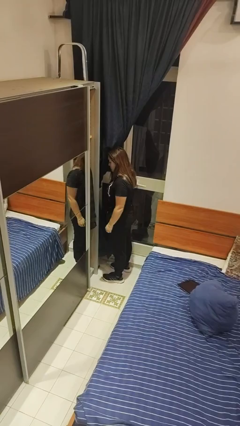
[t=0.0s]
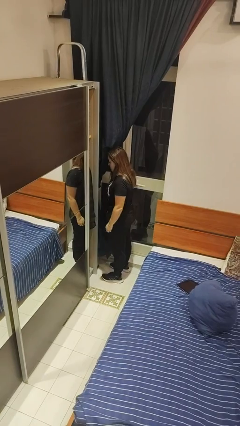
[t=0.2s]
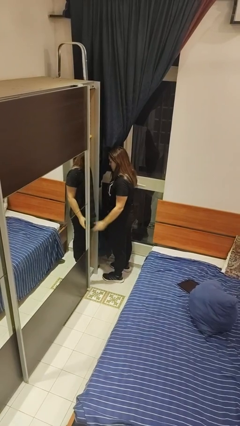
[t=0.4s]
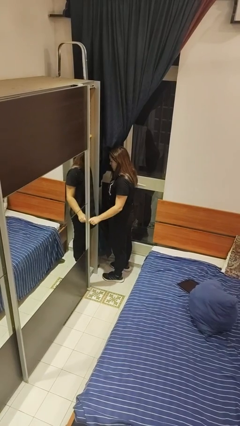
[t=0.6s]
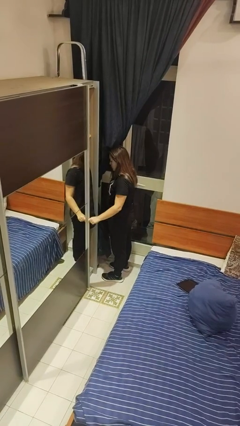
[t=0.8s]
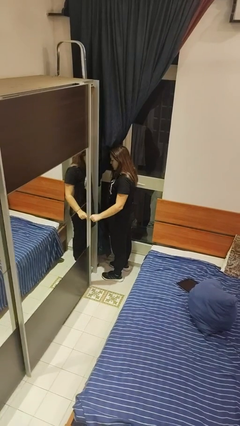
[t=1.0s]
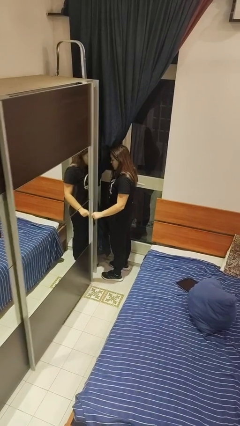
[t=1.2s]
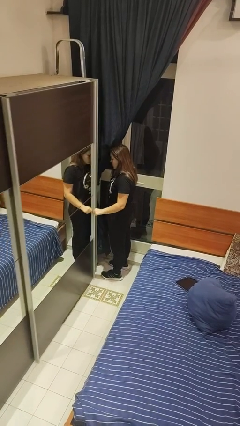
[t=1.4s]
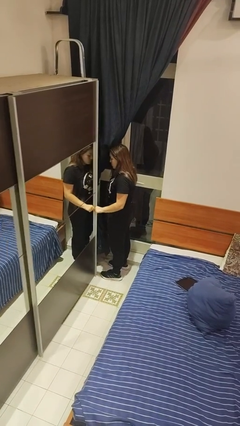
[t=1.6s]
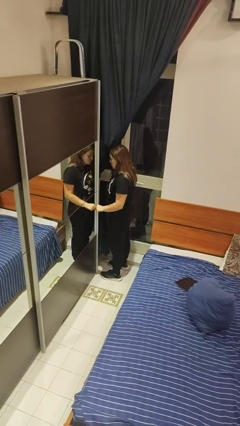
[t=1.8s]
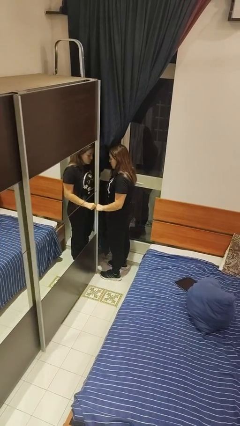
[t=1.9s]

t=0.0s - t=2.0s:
person closes closet door

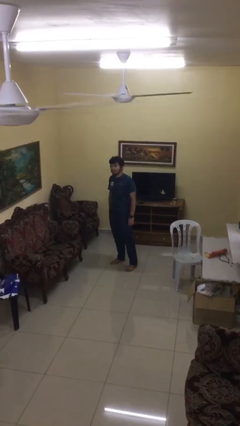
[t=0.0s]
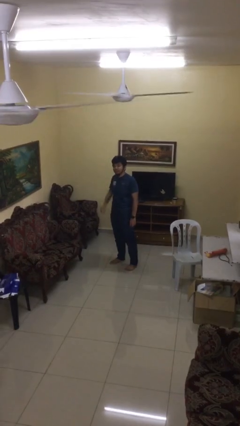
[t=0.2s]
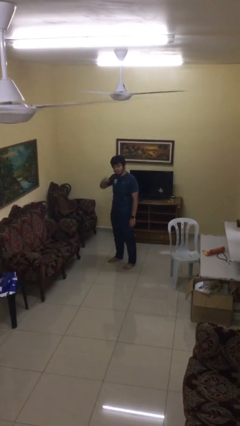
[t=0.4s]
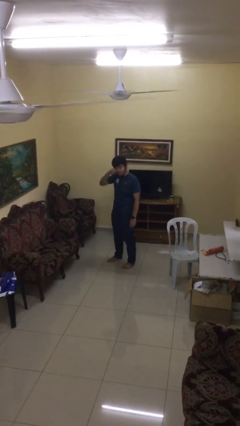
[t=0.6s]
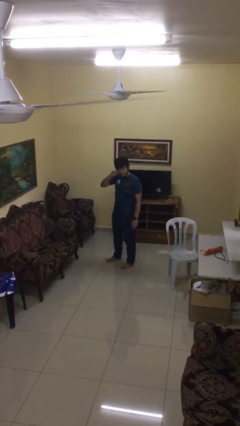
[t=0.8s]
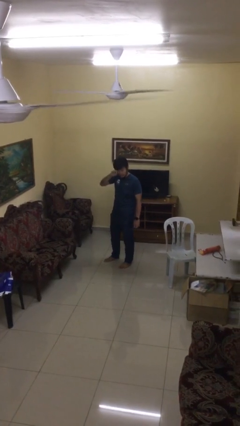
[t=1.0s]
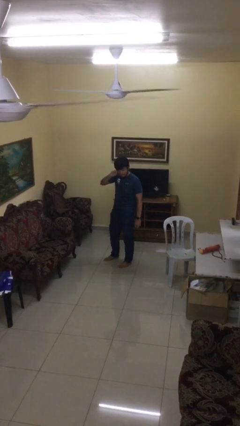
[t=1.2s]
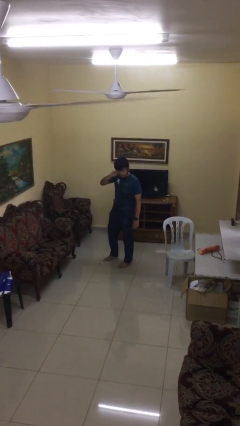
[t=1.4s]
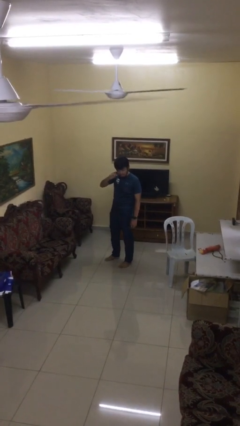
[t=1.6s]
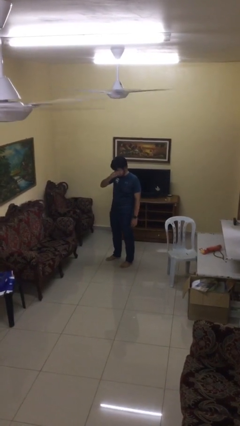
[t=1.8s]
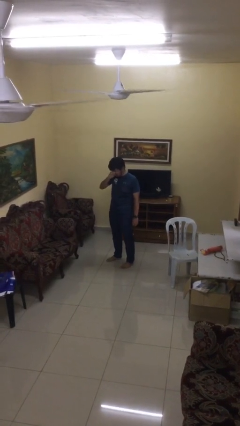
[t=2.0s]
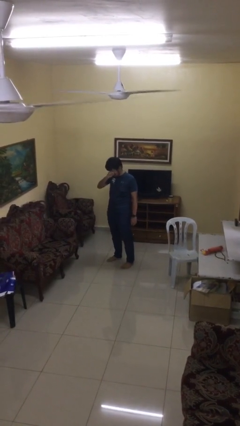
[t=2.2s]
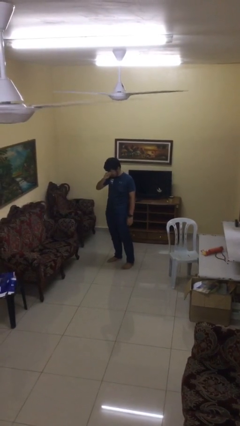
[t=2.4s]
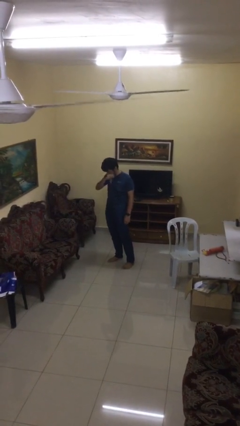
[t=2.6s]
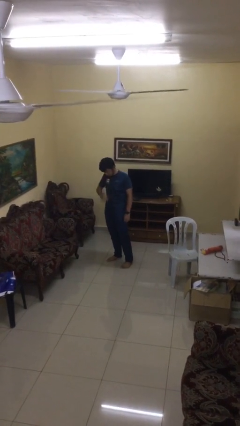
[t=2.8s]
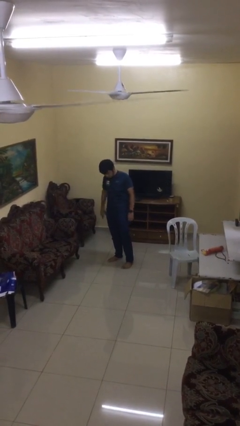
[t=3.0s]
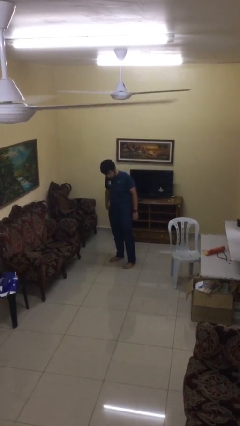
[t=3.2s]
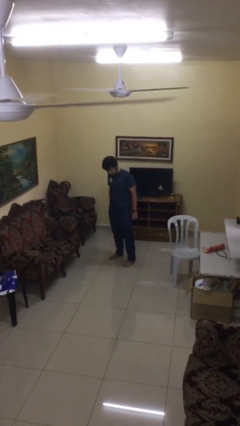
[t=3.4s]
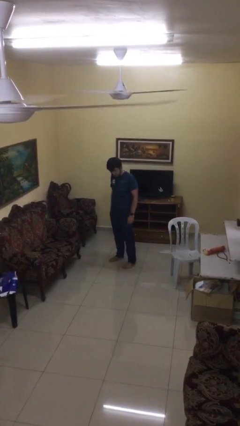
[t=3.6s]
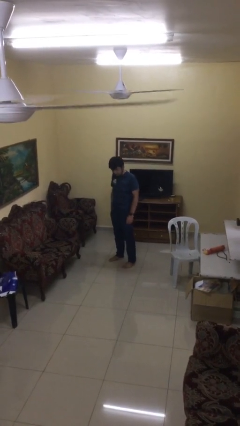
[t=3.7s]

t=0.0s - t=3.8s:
person scratches face

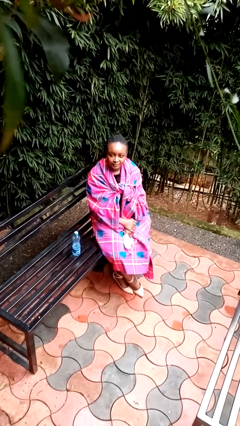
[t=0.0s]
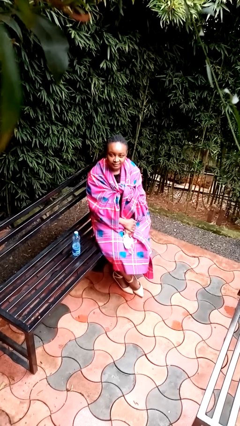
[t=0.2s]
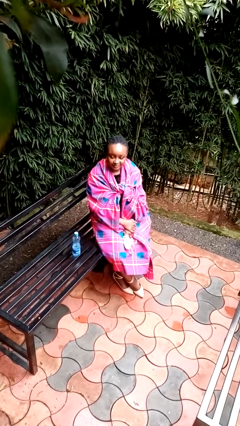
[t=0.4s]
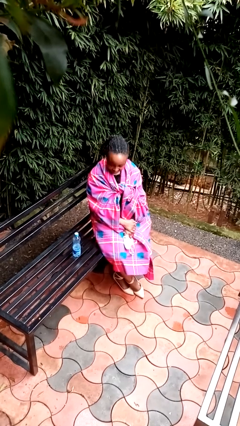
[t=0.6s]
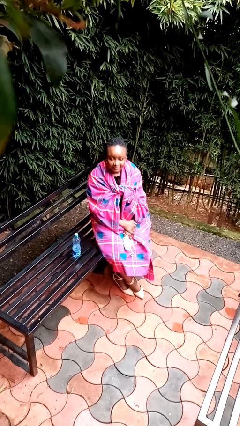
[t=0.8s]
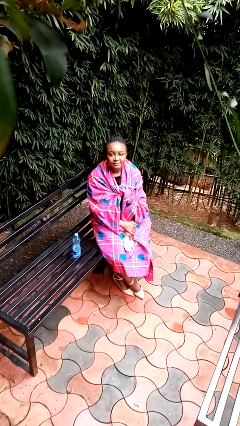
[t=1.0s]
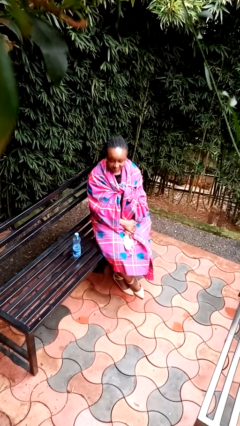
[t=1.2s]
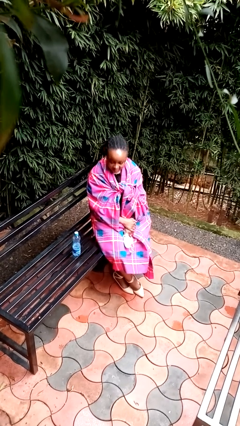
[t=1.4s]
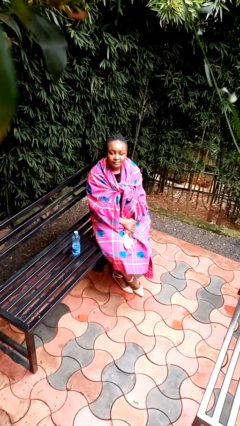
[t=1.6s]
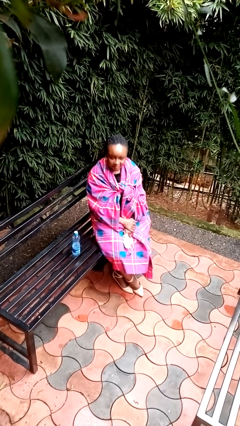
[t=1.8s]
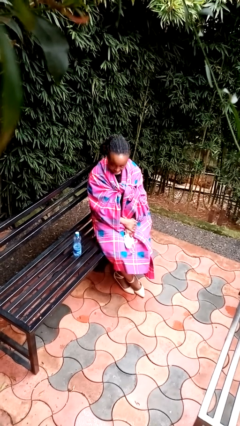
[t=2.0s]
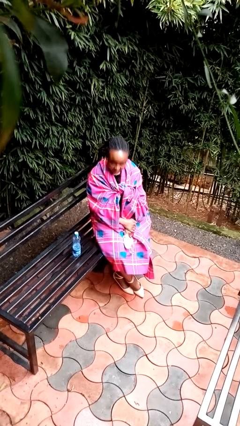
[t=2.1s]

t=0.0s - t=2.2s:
person nods head

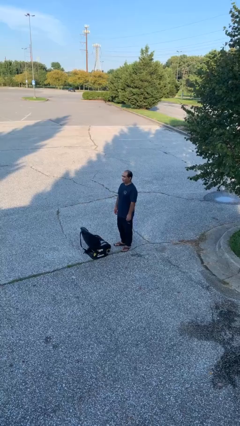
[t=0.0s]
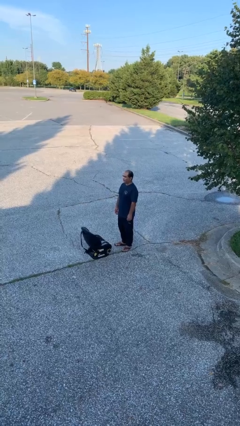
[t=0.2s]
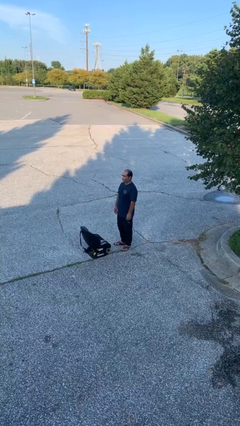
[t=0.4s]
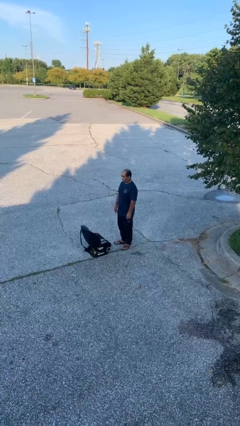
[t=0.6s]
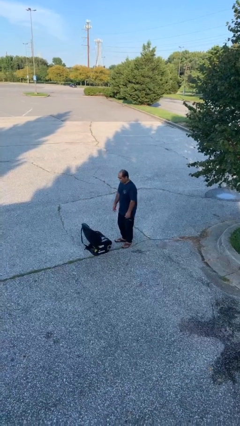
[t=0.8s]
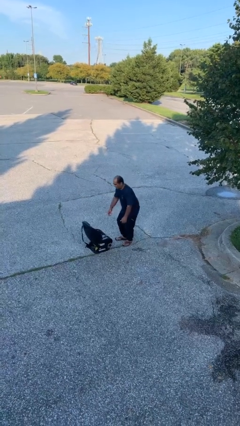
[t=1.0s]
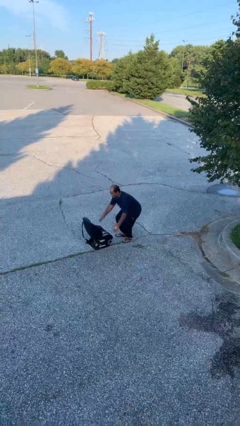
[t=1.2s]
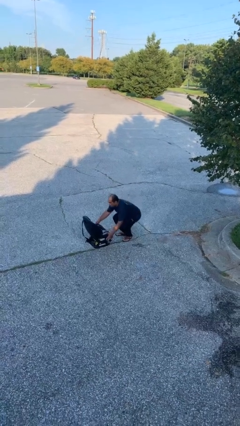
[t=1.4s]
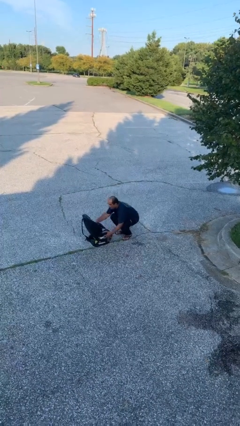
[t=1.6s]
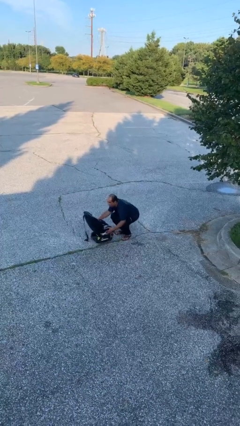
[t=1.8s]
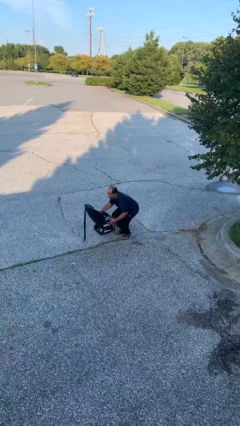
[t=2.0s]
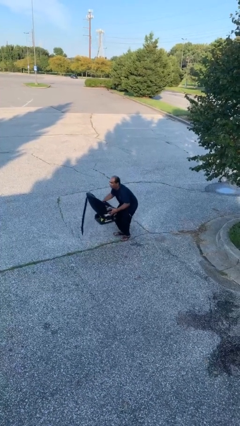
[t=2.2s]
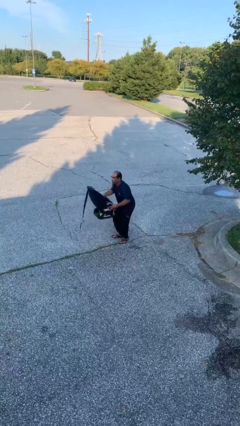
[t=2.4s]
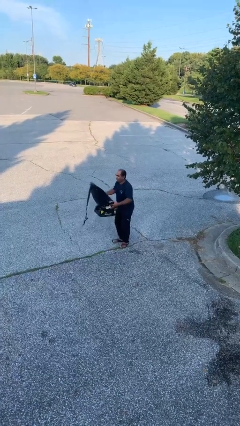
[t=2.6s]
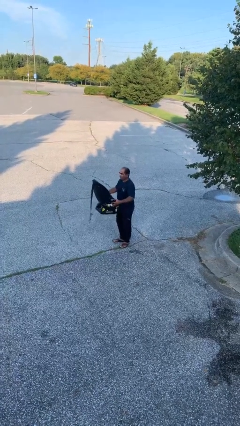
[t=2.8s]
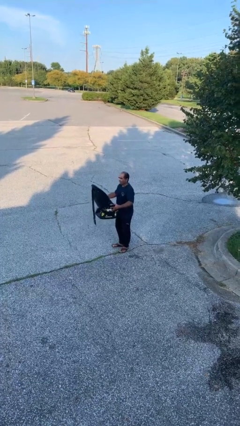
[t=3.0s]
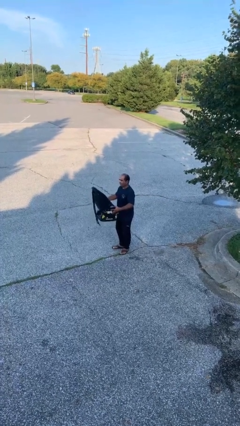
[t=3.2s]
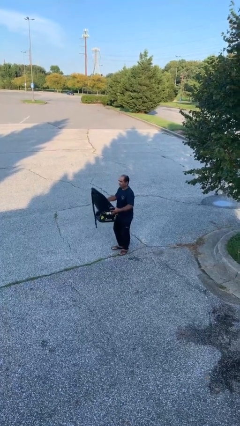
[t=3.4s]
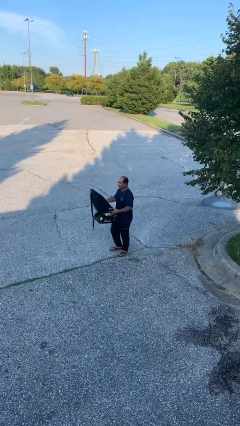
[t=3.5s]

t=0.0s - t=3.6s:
person picks up object from floor

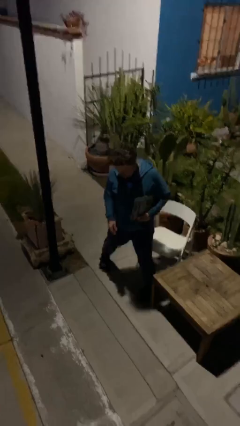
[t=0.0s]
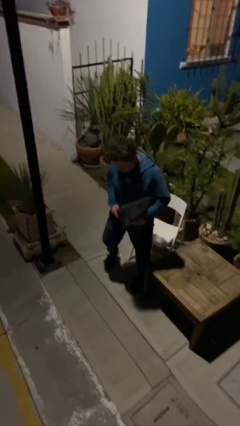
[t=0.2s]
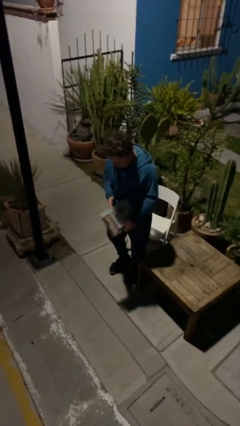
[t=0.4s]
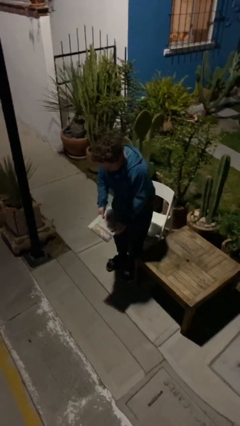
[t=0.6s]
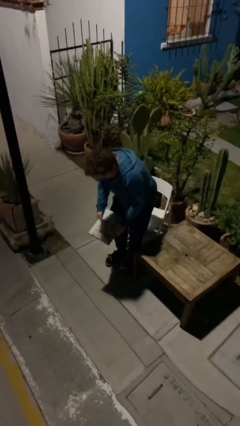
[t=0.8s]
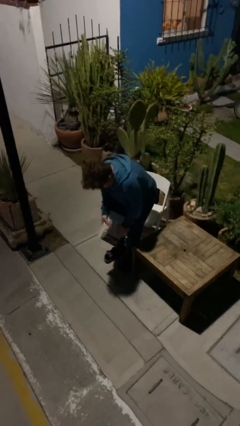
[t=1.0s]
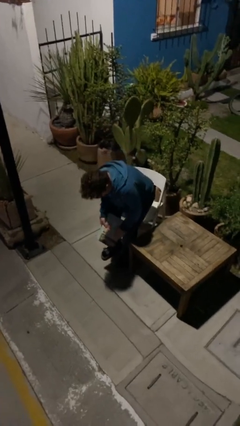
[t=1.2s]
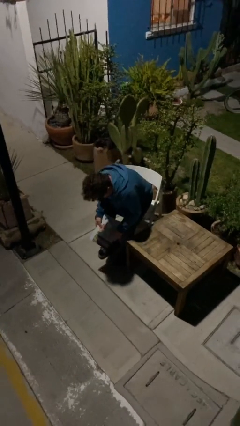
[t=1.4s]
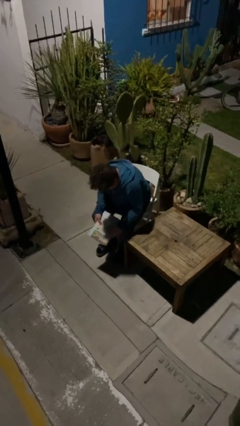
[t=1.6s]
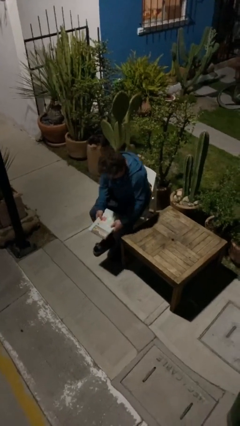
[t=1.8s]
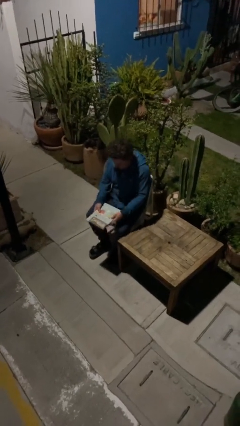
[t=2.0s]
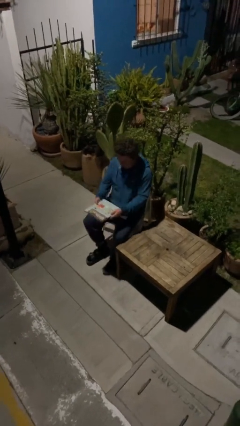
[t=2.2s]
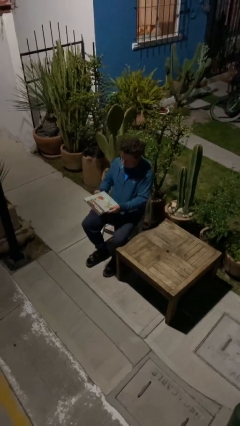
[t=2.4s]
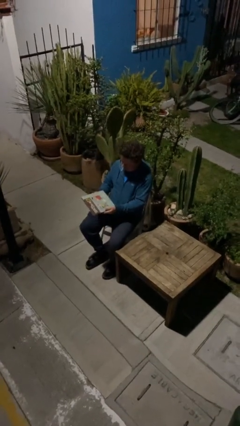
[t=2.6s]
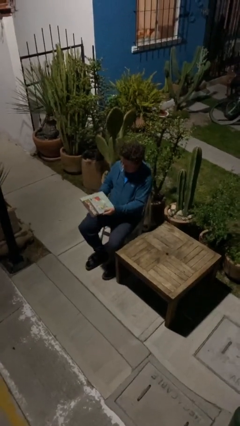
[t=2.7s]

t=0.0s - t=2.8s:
person sits down

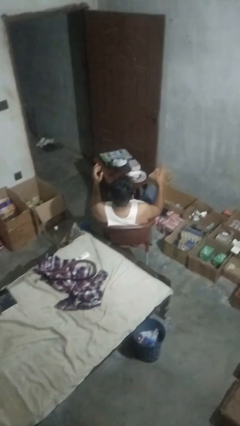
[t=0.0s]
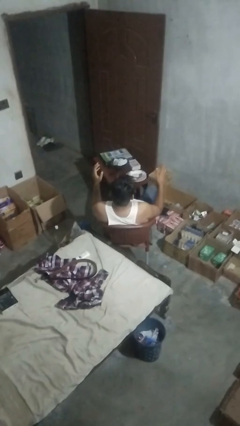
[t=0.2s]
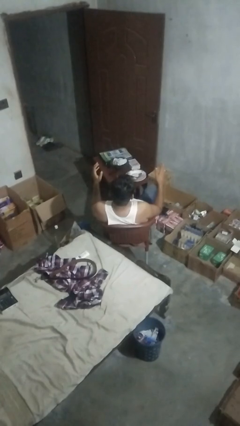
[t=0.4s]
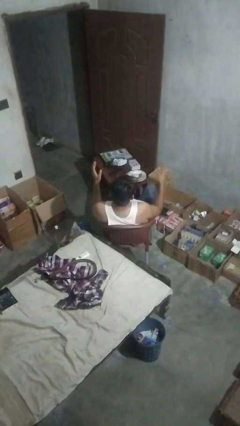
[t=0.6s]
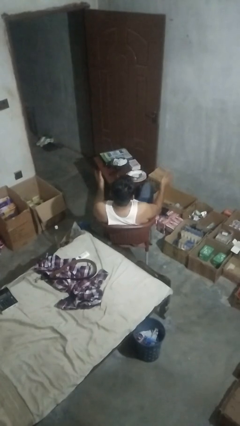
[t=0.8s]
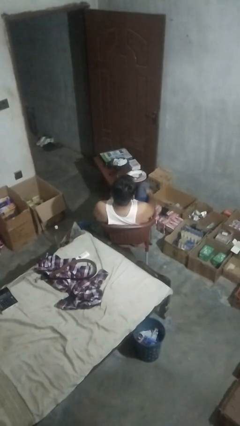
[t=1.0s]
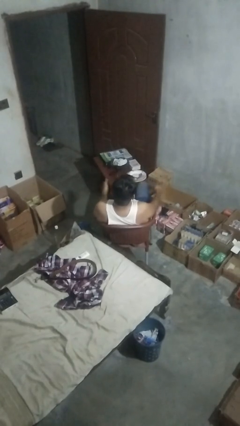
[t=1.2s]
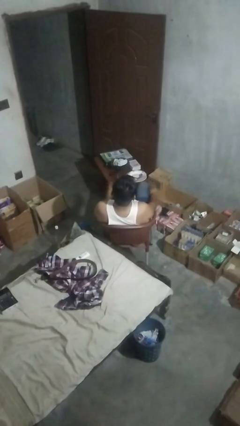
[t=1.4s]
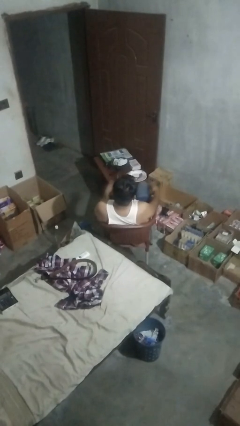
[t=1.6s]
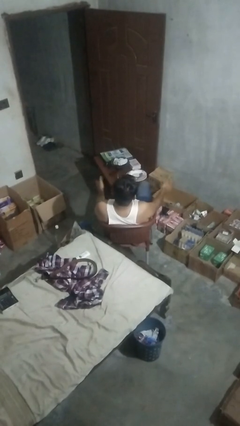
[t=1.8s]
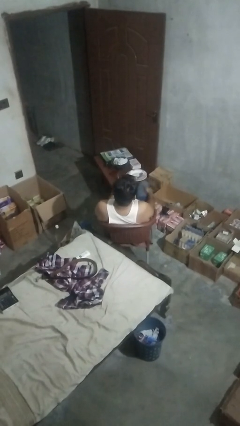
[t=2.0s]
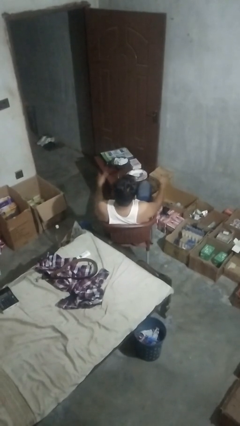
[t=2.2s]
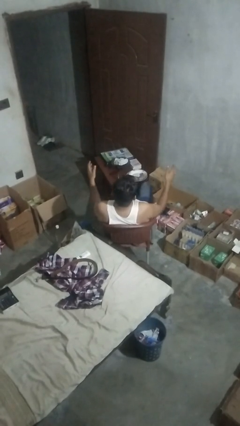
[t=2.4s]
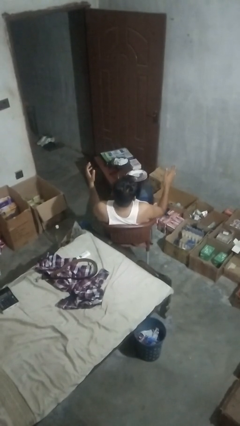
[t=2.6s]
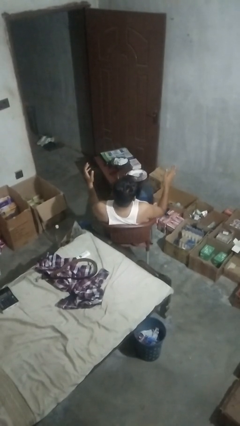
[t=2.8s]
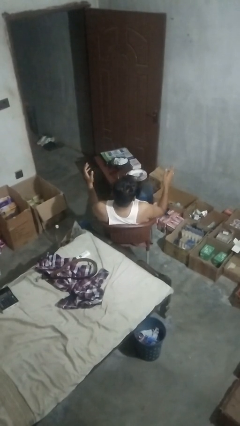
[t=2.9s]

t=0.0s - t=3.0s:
person slaps hands on thighs
